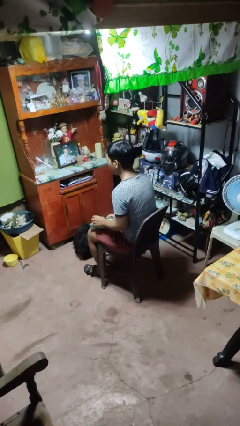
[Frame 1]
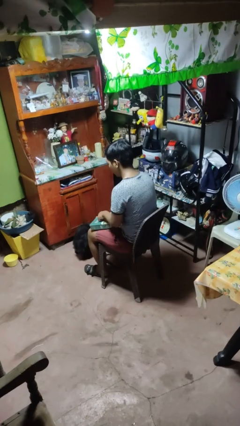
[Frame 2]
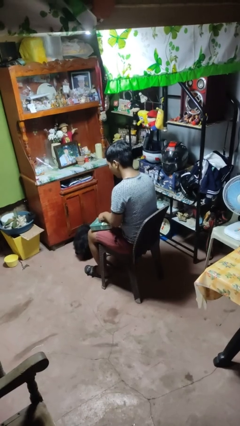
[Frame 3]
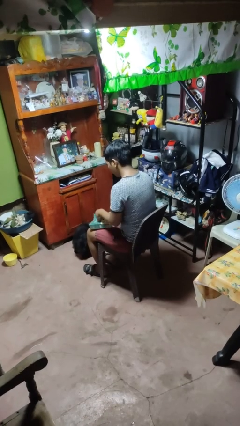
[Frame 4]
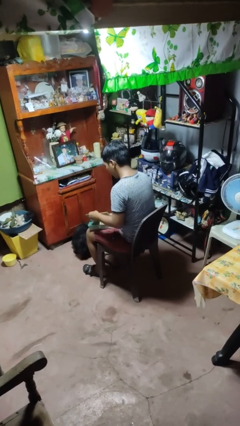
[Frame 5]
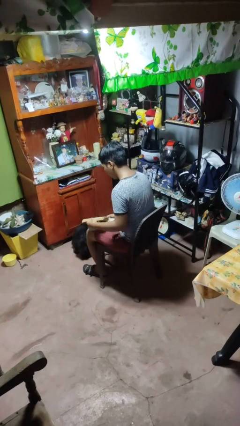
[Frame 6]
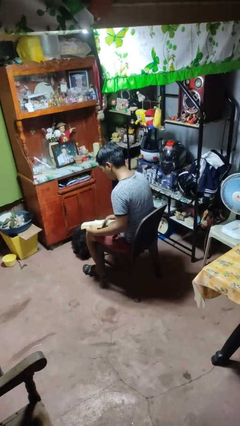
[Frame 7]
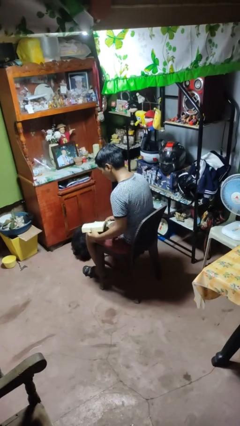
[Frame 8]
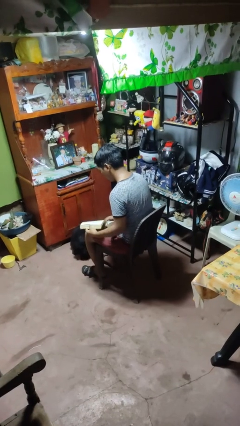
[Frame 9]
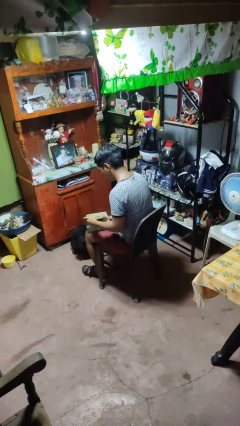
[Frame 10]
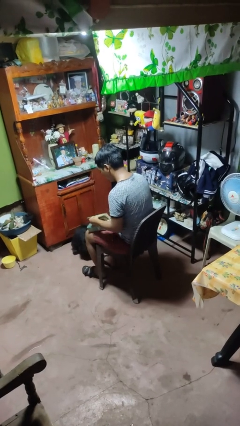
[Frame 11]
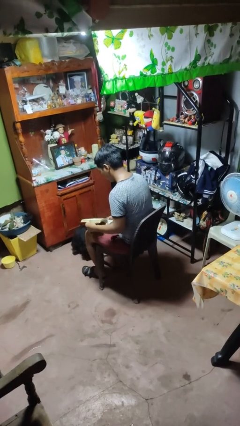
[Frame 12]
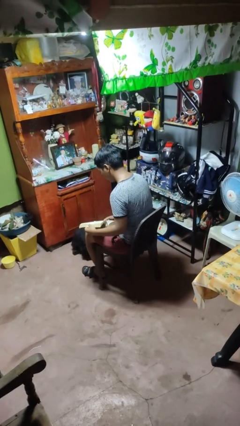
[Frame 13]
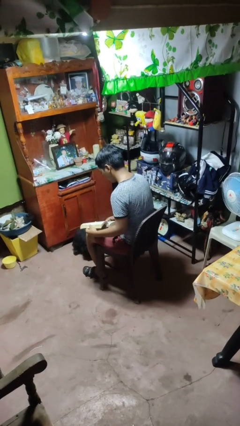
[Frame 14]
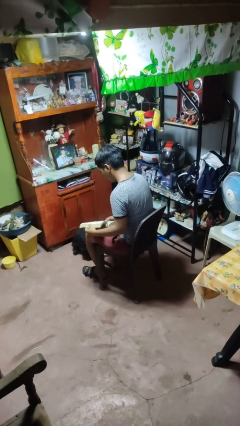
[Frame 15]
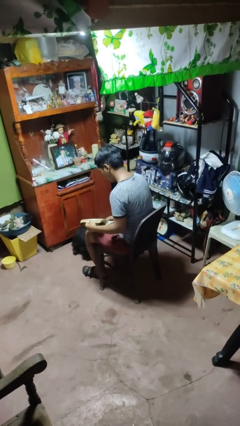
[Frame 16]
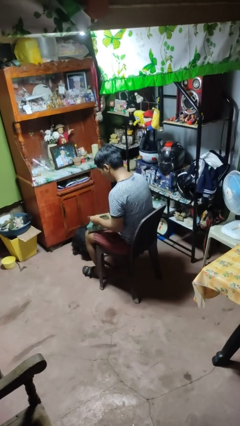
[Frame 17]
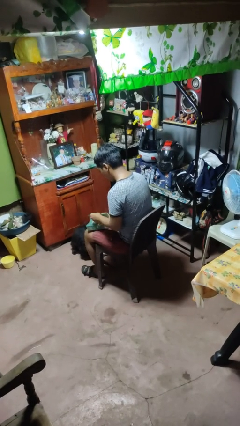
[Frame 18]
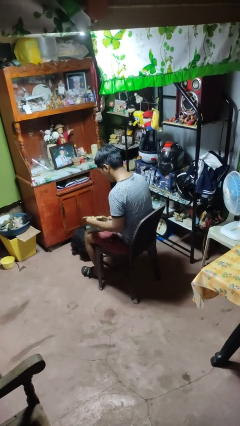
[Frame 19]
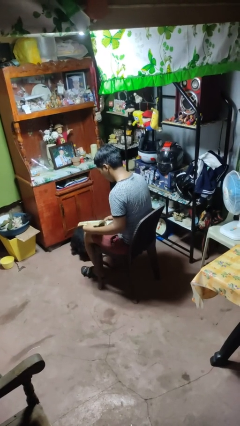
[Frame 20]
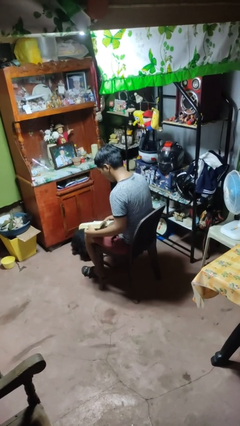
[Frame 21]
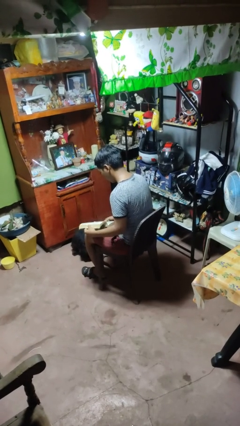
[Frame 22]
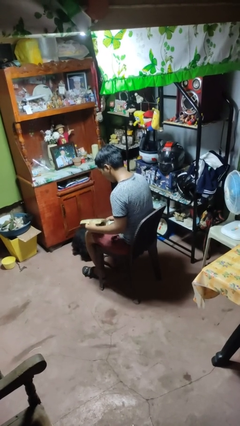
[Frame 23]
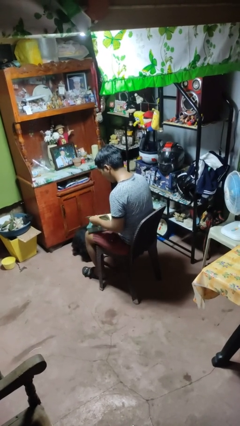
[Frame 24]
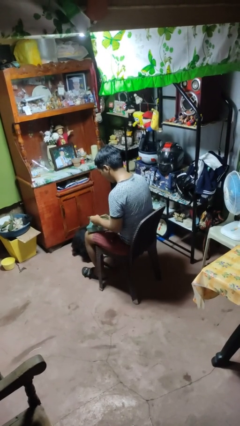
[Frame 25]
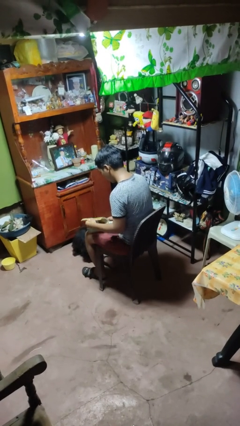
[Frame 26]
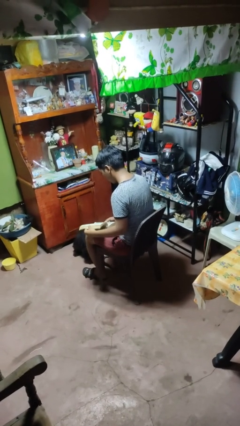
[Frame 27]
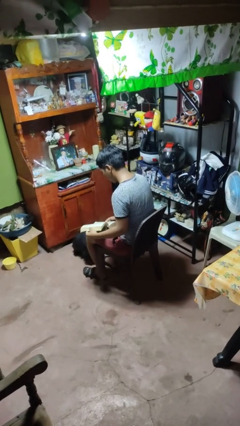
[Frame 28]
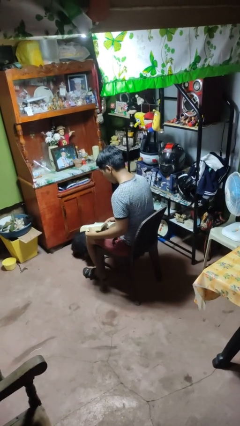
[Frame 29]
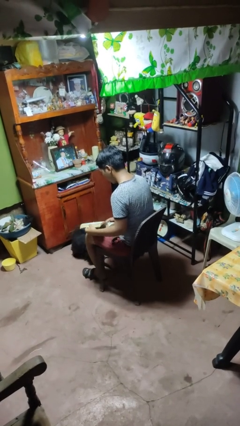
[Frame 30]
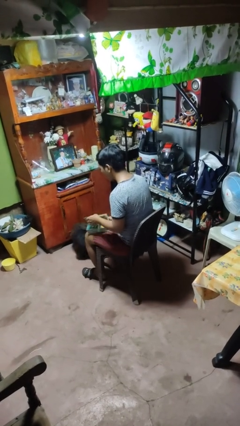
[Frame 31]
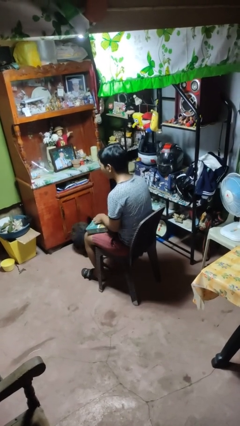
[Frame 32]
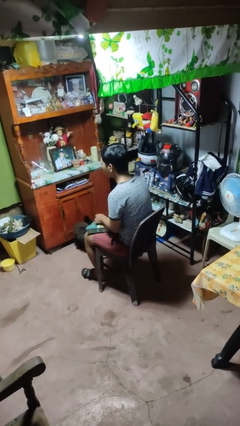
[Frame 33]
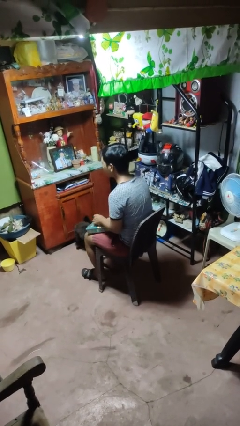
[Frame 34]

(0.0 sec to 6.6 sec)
person reads book

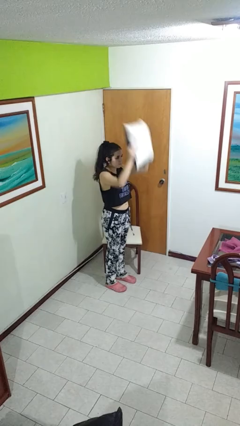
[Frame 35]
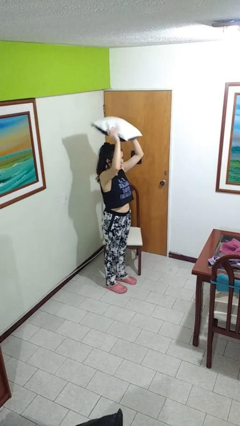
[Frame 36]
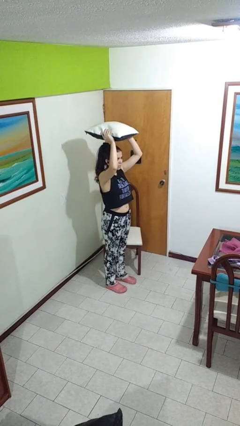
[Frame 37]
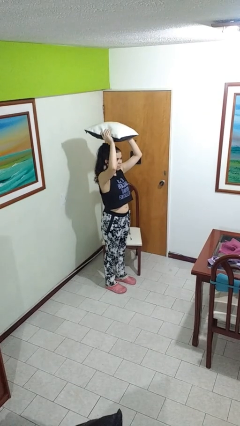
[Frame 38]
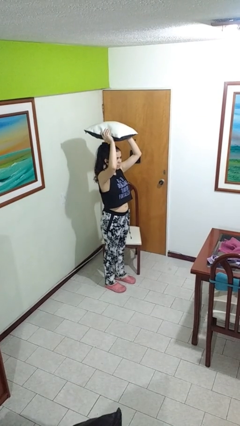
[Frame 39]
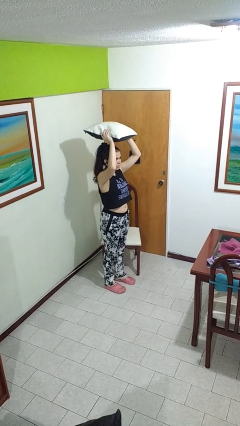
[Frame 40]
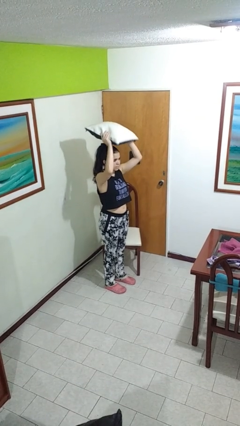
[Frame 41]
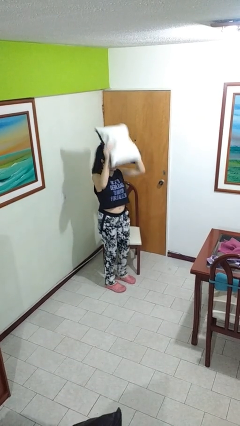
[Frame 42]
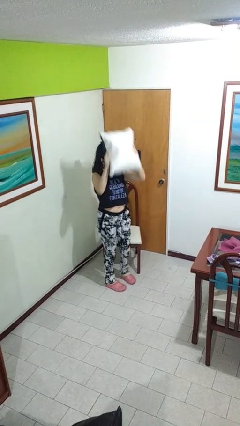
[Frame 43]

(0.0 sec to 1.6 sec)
person holds object above head

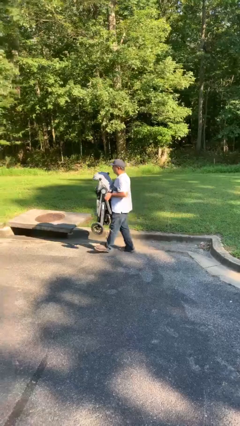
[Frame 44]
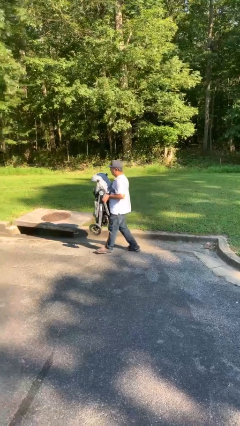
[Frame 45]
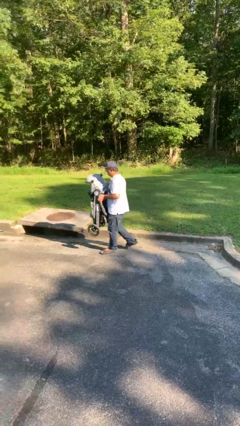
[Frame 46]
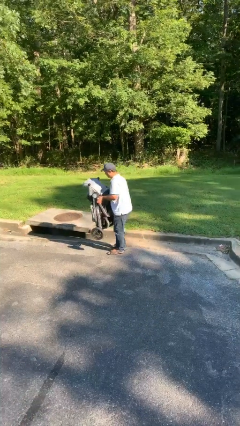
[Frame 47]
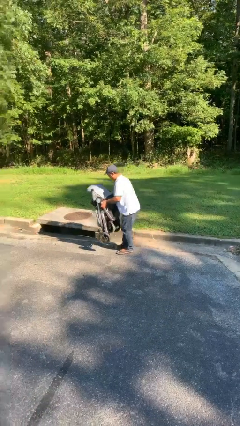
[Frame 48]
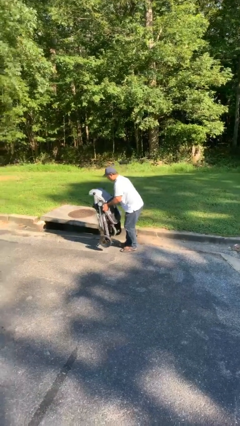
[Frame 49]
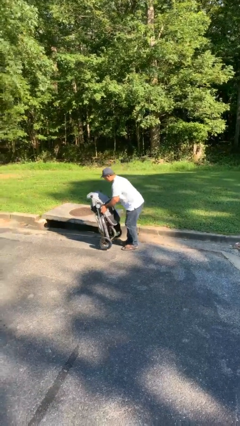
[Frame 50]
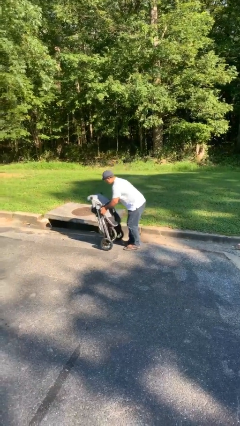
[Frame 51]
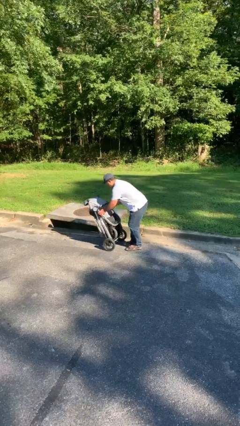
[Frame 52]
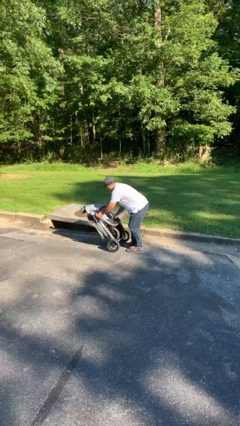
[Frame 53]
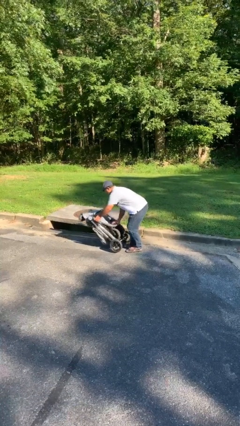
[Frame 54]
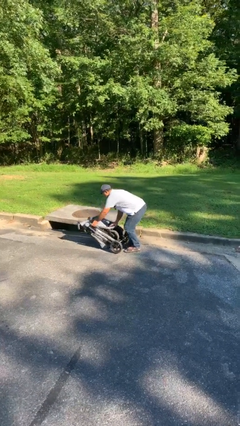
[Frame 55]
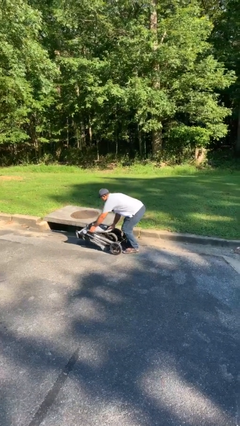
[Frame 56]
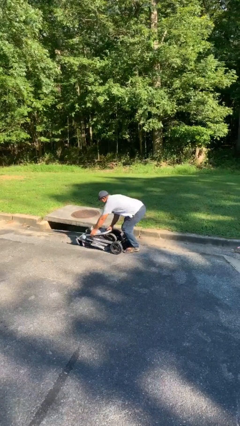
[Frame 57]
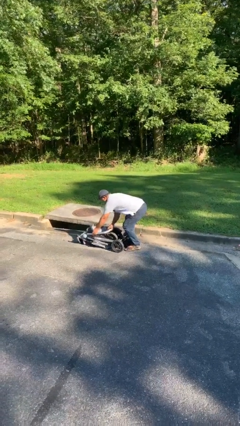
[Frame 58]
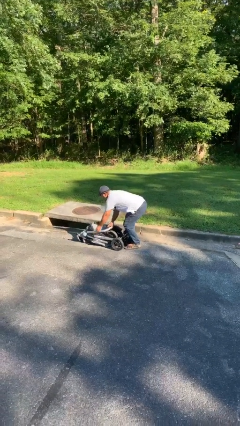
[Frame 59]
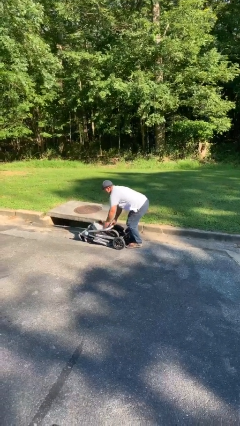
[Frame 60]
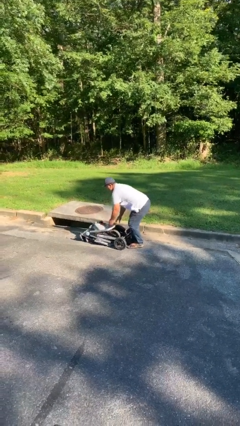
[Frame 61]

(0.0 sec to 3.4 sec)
person puts down object on floor

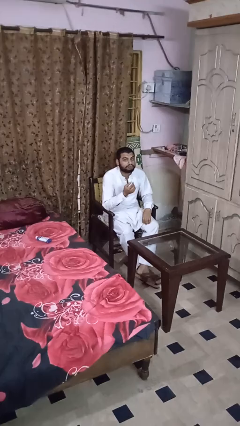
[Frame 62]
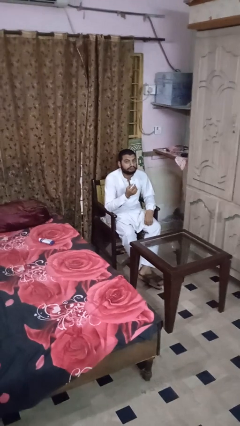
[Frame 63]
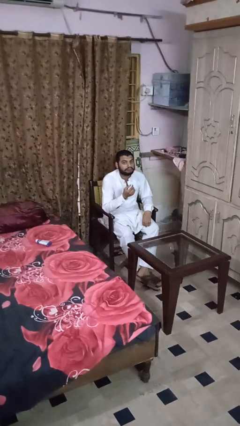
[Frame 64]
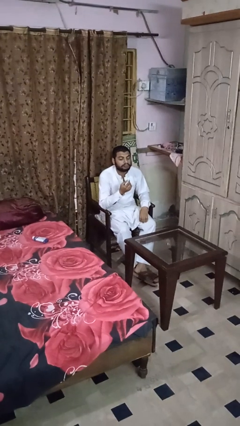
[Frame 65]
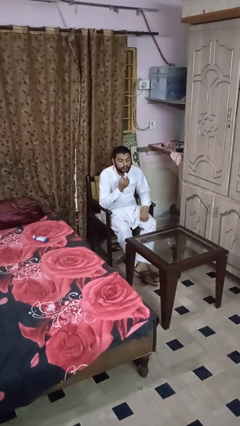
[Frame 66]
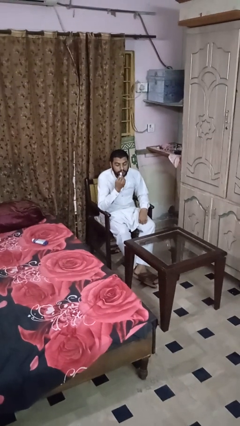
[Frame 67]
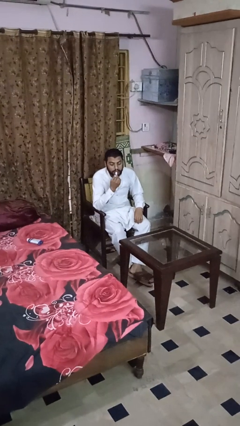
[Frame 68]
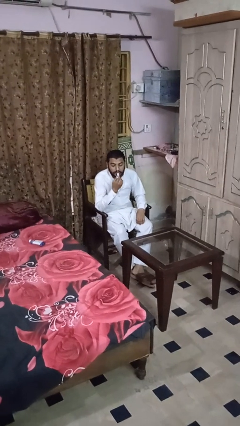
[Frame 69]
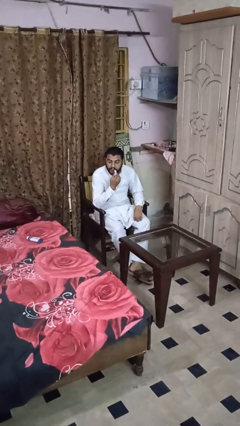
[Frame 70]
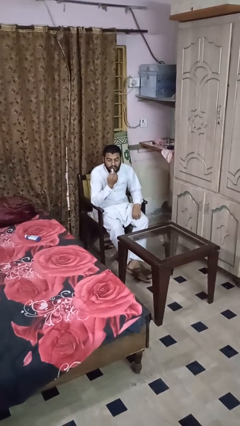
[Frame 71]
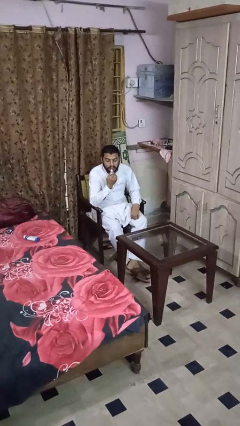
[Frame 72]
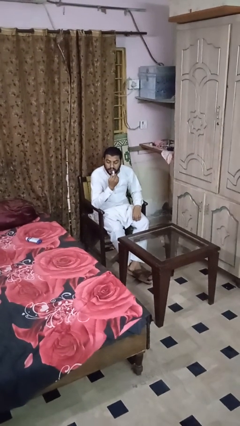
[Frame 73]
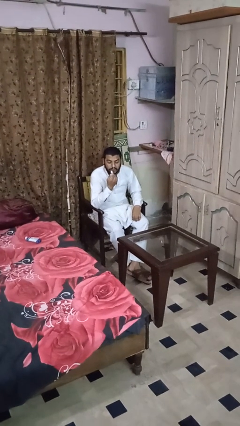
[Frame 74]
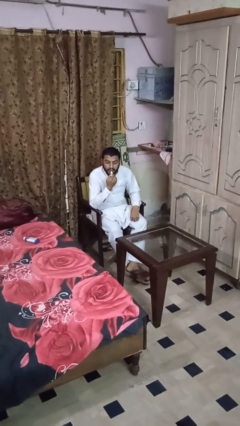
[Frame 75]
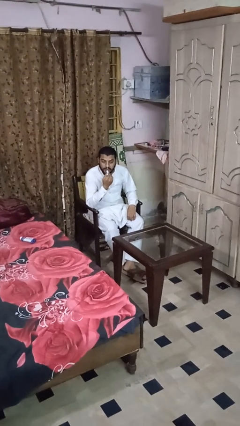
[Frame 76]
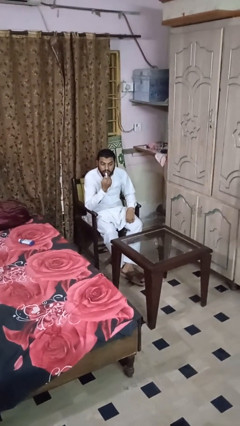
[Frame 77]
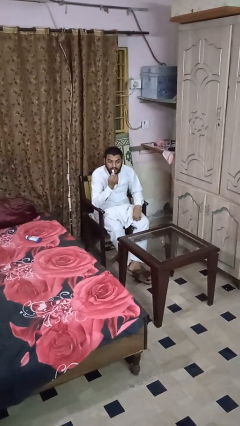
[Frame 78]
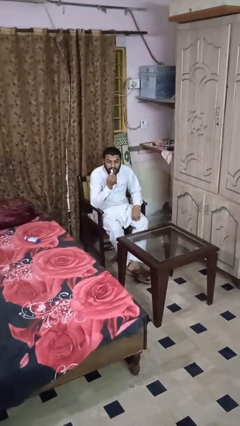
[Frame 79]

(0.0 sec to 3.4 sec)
person applies lip makeup

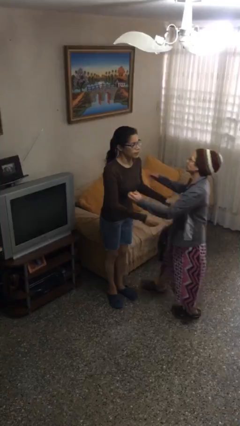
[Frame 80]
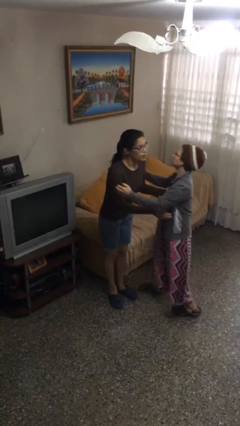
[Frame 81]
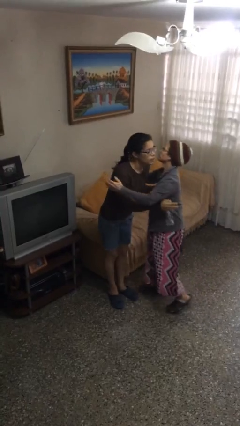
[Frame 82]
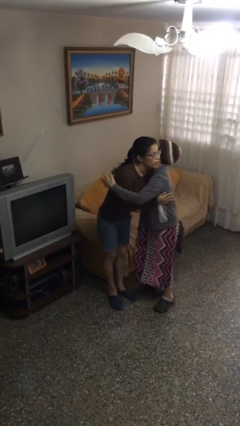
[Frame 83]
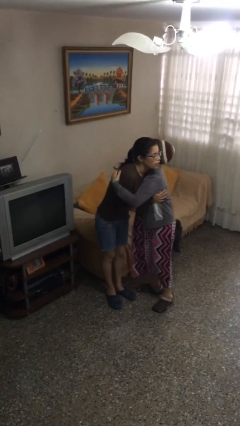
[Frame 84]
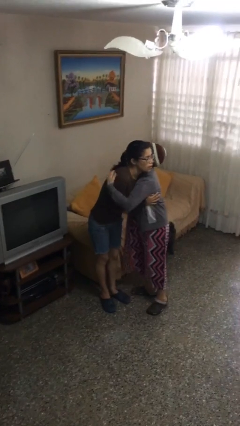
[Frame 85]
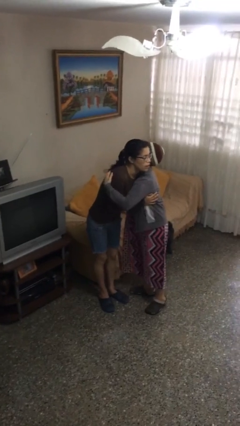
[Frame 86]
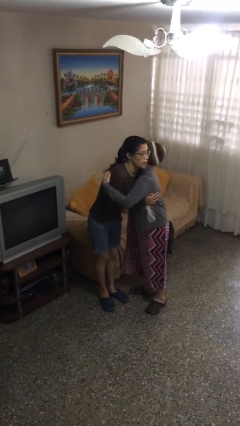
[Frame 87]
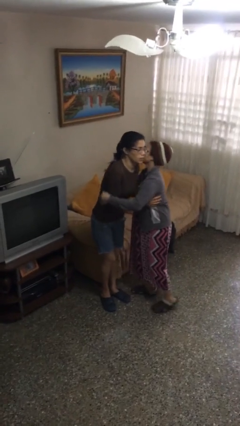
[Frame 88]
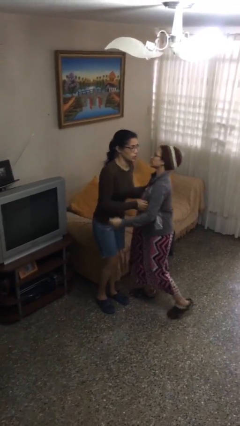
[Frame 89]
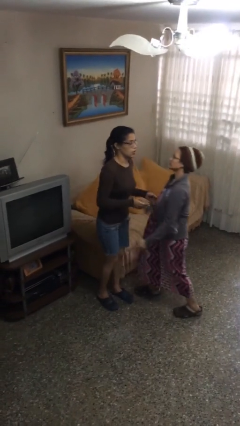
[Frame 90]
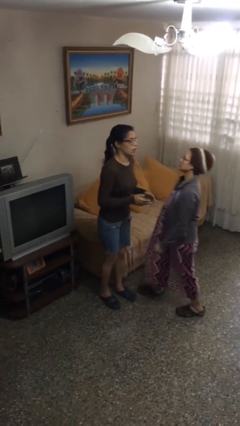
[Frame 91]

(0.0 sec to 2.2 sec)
person embraces person

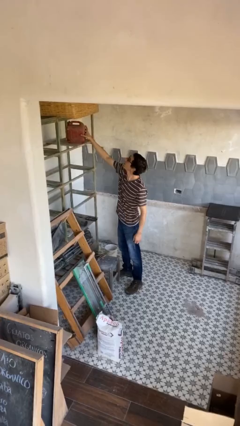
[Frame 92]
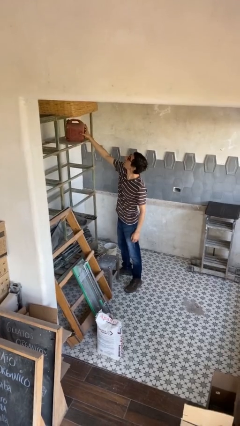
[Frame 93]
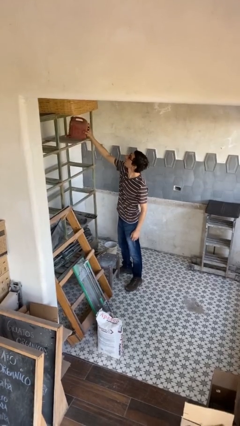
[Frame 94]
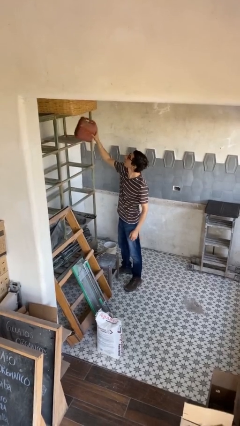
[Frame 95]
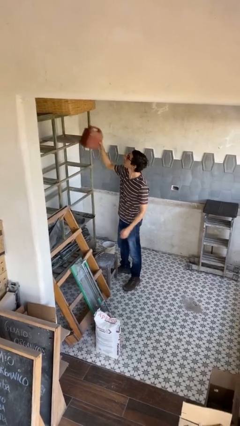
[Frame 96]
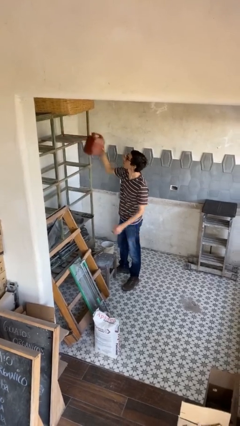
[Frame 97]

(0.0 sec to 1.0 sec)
person picks up object from shelf
